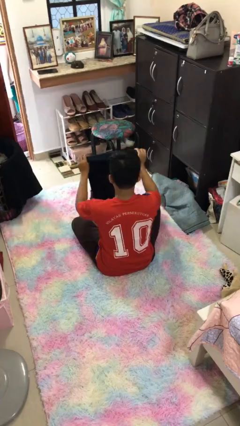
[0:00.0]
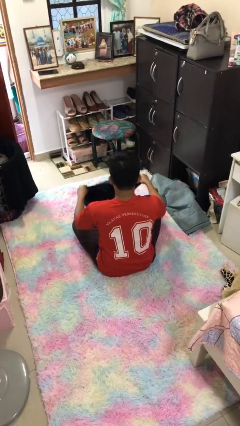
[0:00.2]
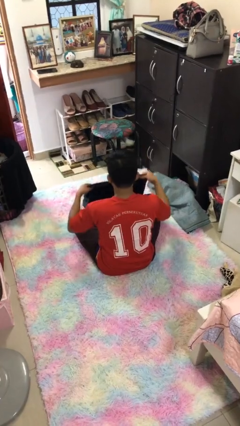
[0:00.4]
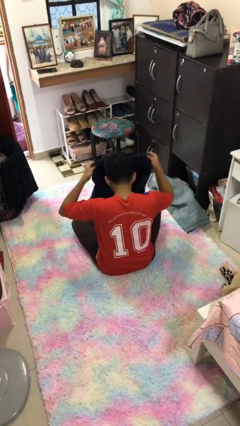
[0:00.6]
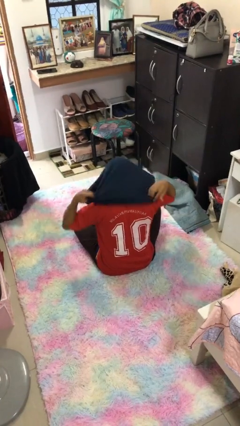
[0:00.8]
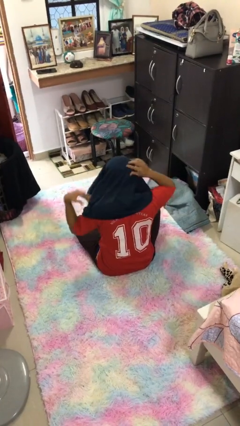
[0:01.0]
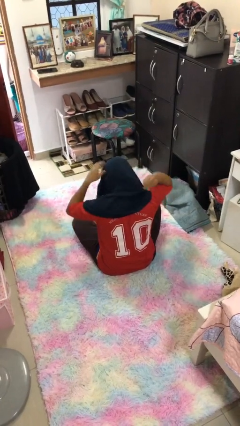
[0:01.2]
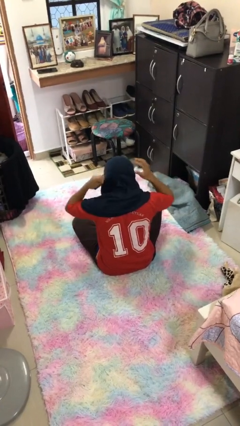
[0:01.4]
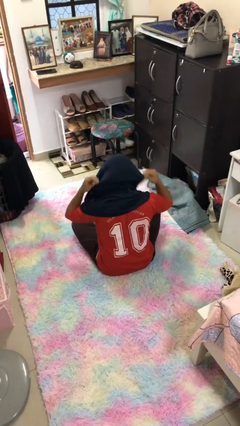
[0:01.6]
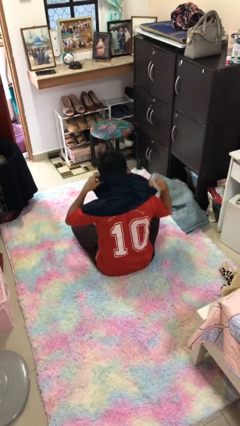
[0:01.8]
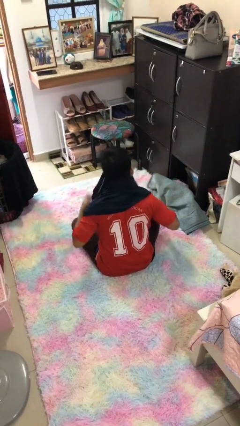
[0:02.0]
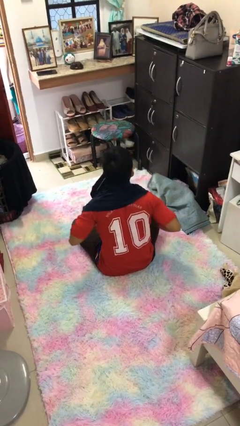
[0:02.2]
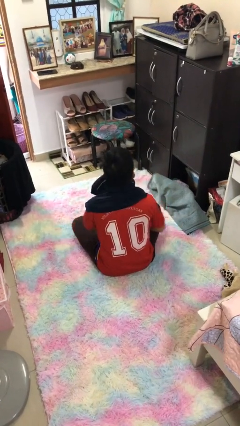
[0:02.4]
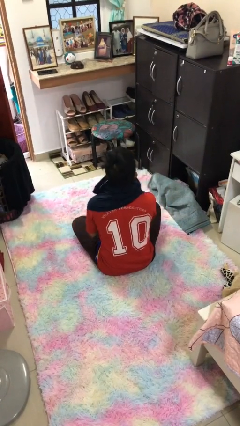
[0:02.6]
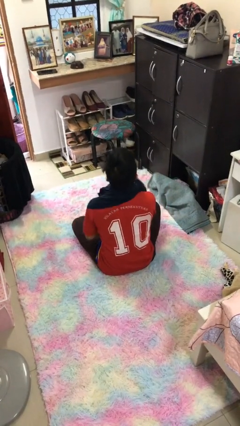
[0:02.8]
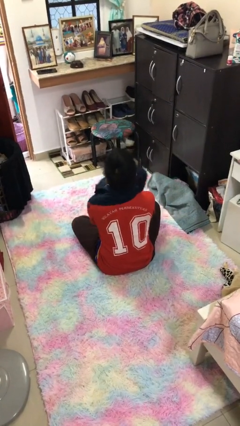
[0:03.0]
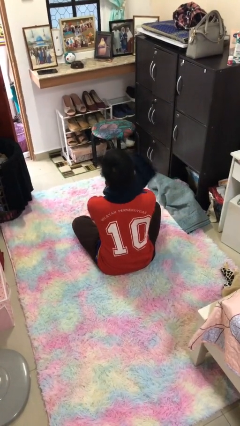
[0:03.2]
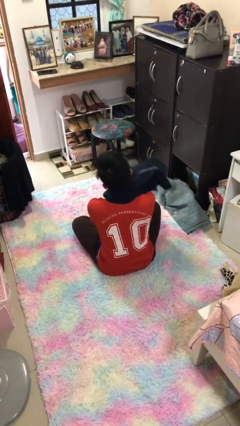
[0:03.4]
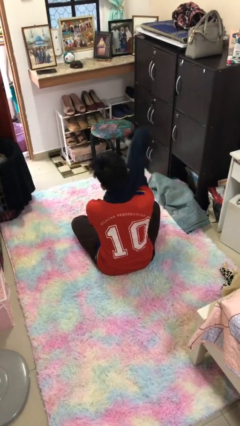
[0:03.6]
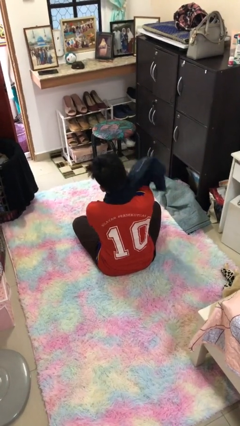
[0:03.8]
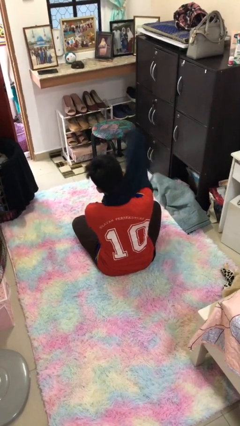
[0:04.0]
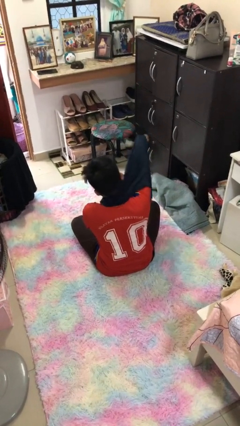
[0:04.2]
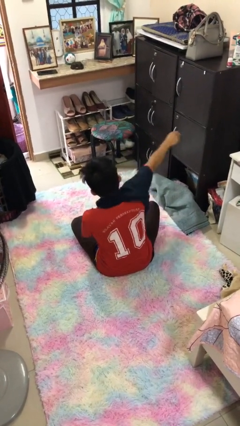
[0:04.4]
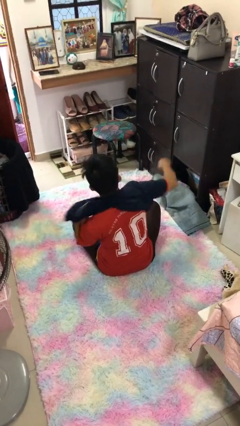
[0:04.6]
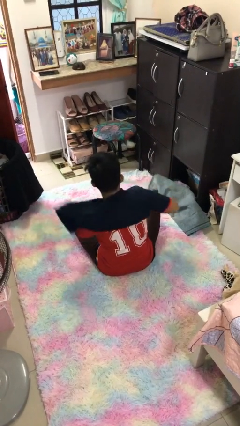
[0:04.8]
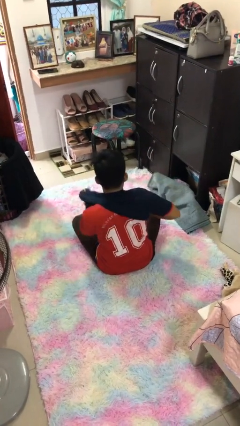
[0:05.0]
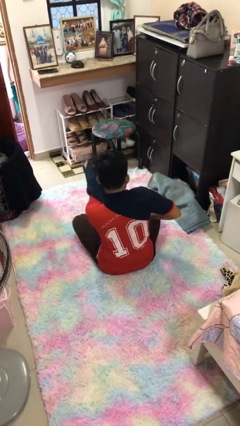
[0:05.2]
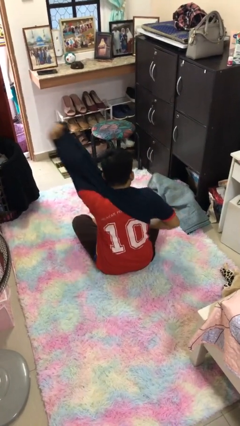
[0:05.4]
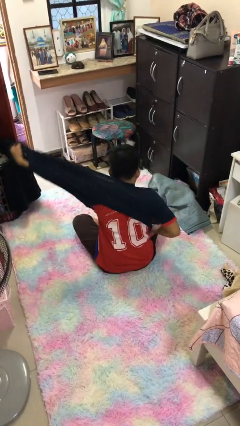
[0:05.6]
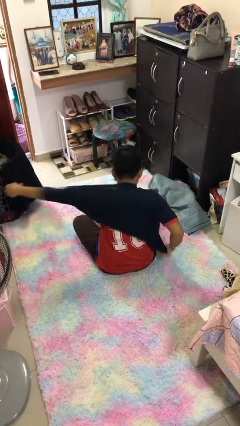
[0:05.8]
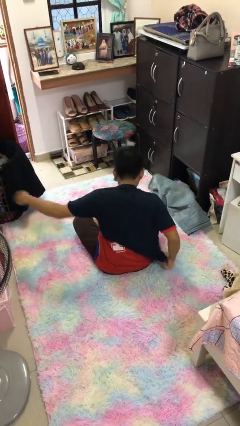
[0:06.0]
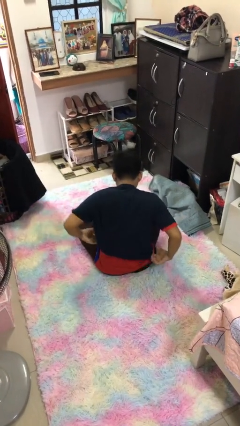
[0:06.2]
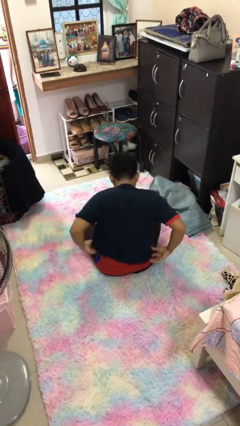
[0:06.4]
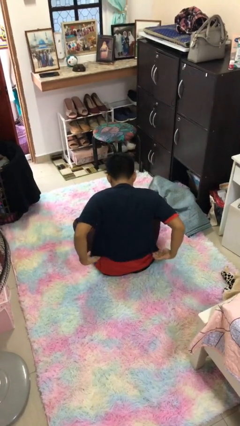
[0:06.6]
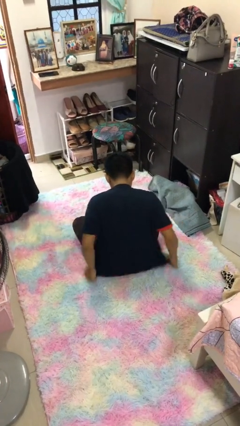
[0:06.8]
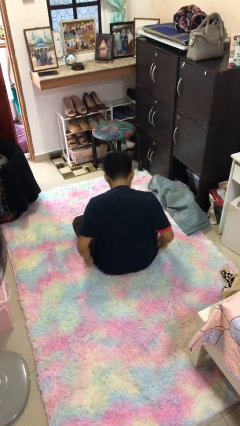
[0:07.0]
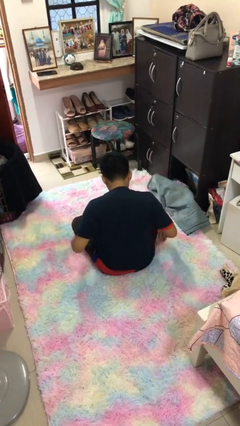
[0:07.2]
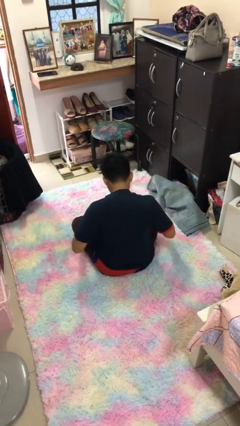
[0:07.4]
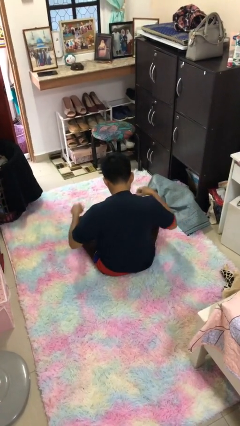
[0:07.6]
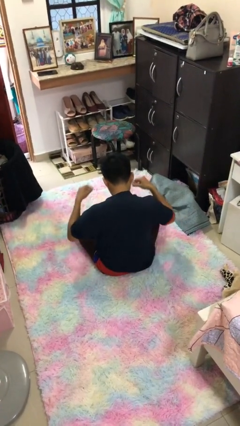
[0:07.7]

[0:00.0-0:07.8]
person puts on shirt

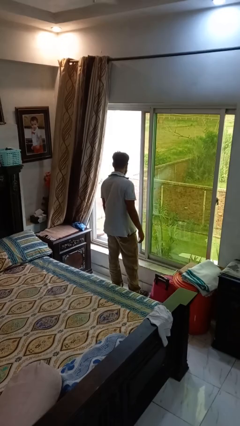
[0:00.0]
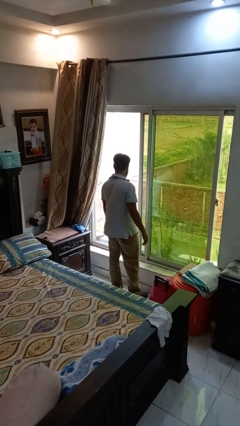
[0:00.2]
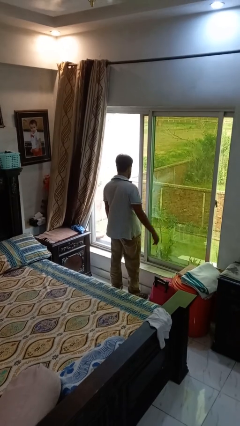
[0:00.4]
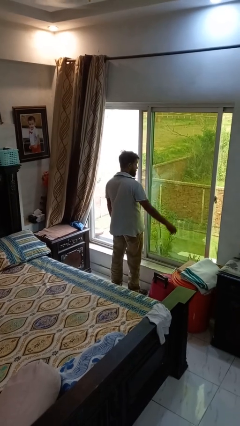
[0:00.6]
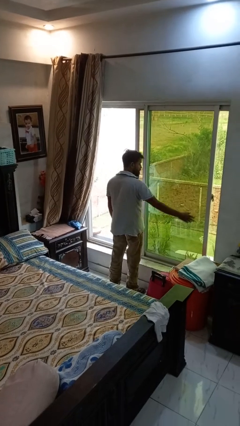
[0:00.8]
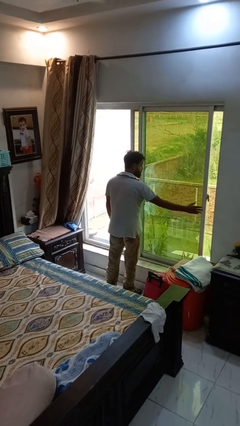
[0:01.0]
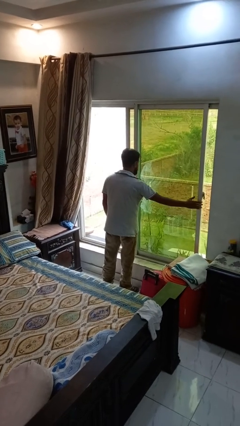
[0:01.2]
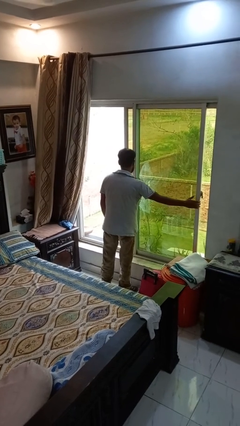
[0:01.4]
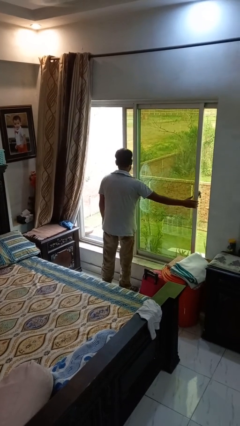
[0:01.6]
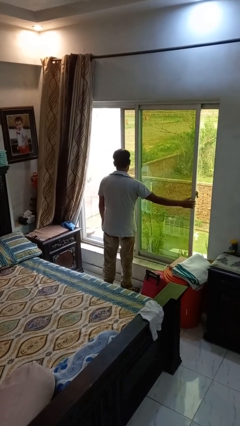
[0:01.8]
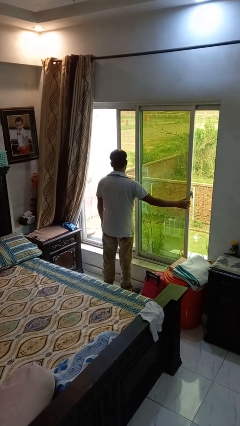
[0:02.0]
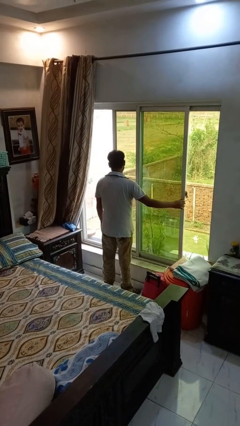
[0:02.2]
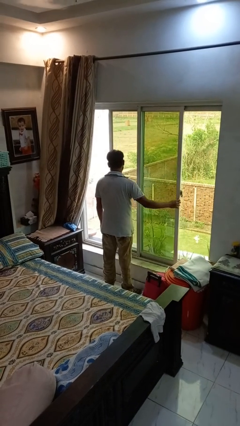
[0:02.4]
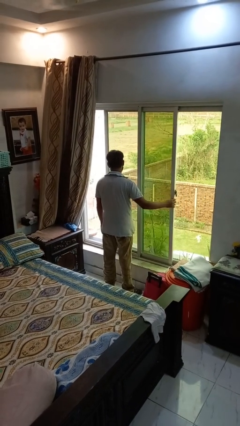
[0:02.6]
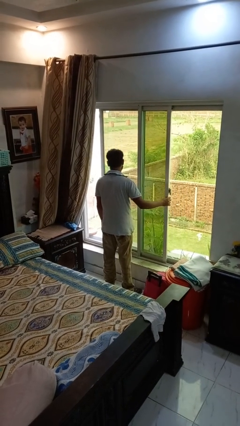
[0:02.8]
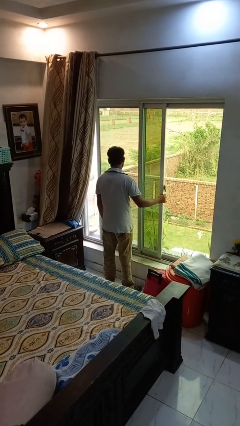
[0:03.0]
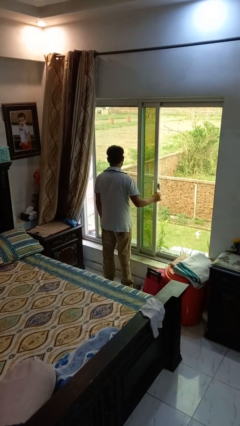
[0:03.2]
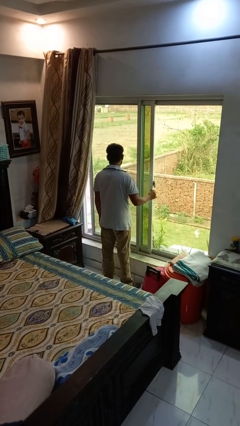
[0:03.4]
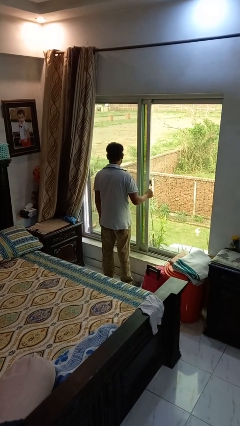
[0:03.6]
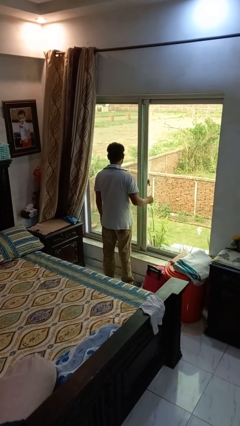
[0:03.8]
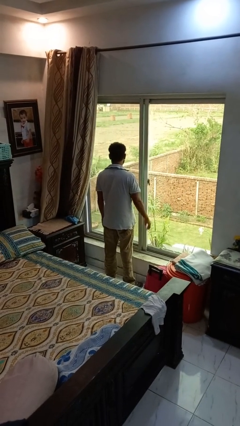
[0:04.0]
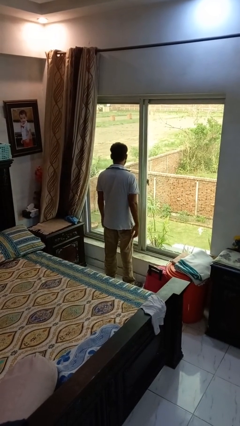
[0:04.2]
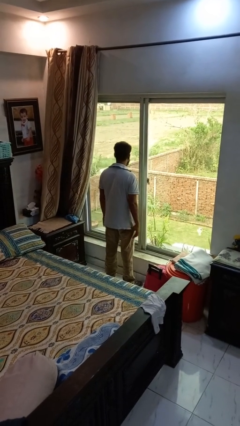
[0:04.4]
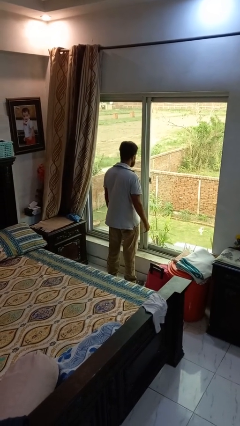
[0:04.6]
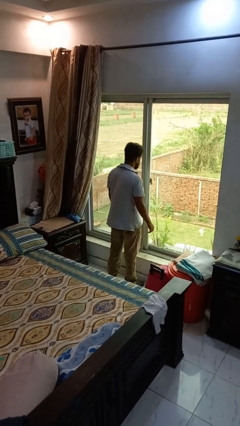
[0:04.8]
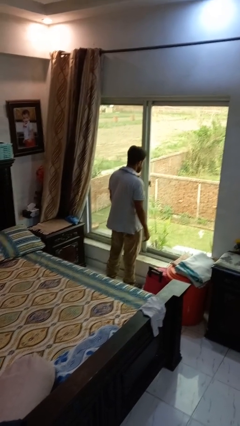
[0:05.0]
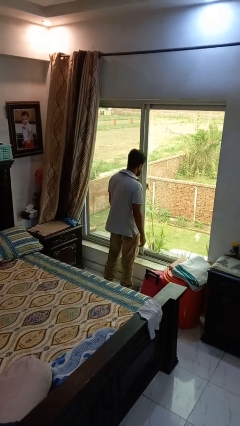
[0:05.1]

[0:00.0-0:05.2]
person closes sliding door

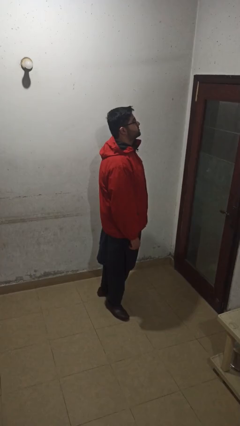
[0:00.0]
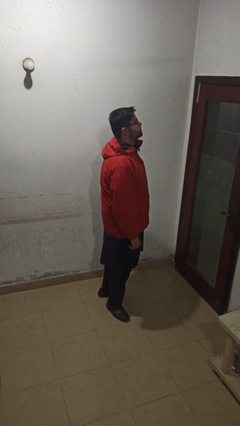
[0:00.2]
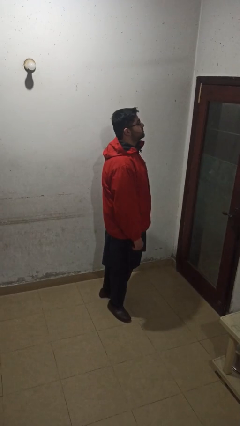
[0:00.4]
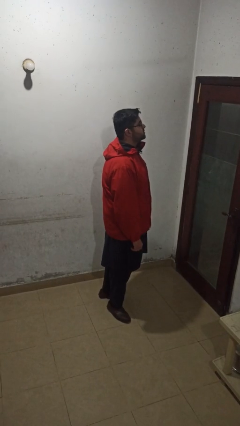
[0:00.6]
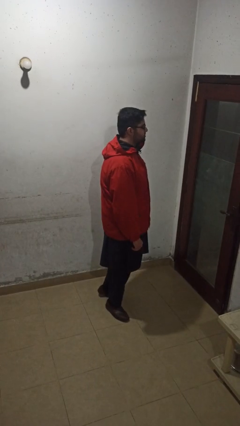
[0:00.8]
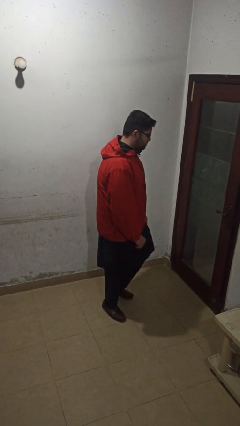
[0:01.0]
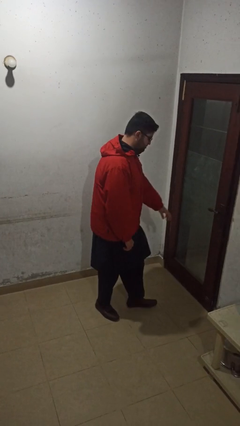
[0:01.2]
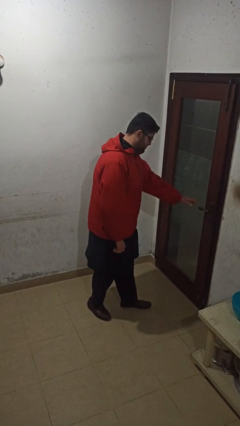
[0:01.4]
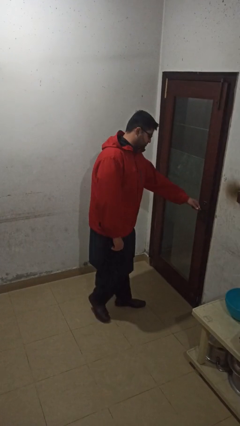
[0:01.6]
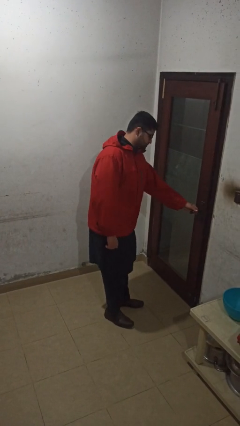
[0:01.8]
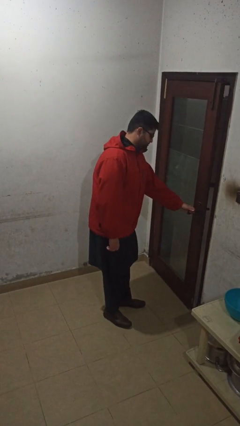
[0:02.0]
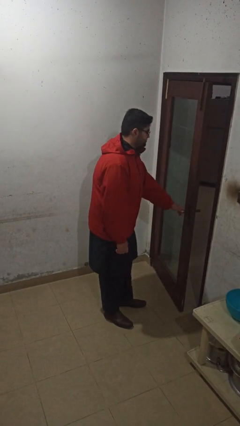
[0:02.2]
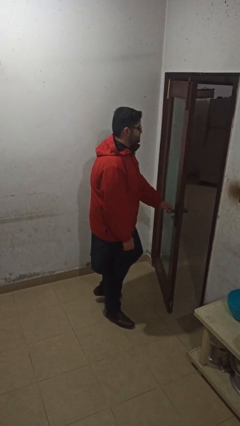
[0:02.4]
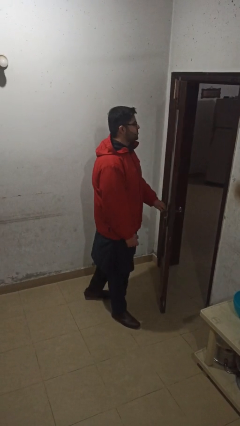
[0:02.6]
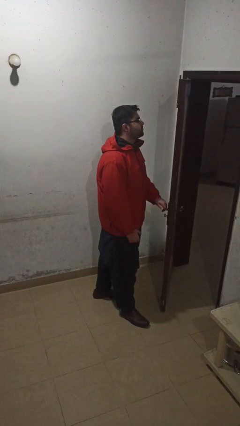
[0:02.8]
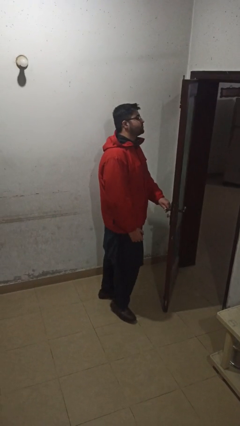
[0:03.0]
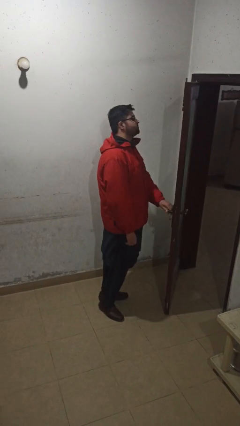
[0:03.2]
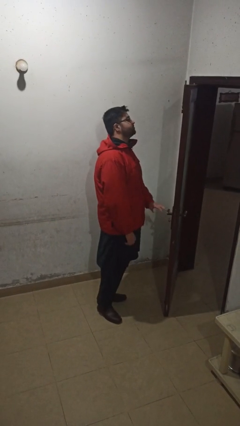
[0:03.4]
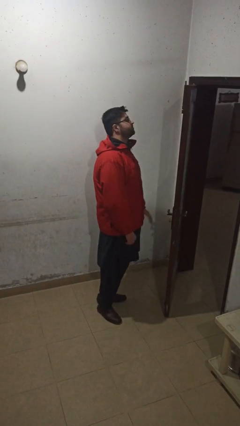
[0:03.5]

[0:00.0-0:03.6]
person opens facility door

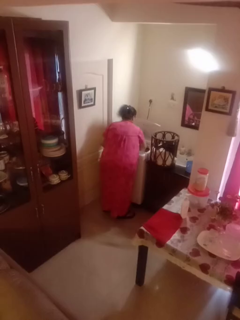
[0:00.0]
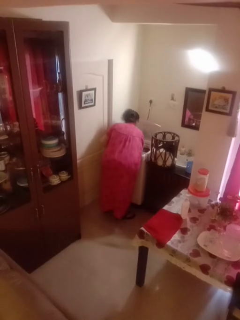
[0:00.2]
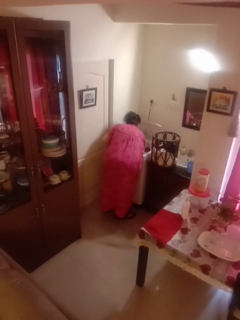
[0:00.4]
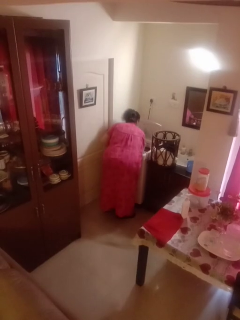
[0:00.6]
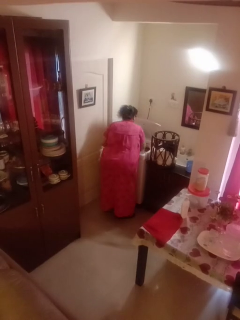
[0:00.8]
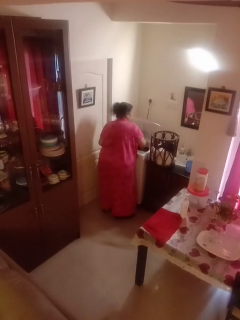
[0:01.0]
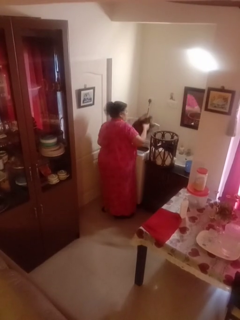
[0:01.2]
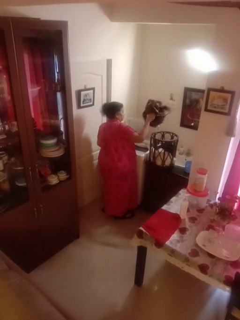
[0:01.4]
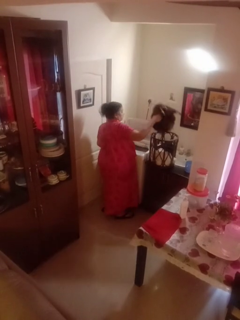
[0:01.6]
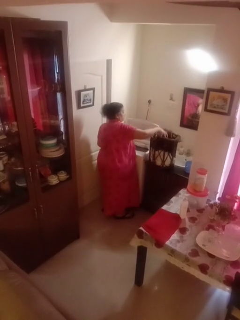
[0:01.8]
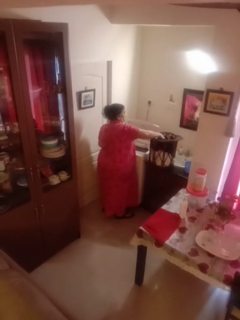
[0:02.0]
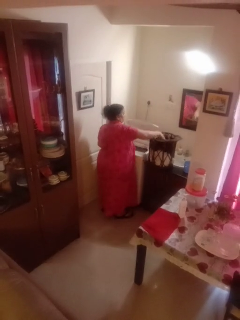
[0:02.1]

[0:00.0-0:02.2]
person unloads clotheswasher
